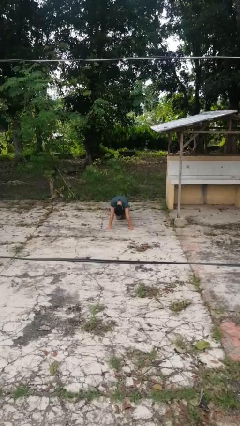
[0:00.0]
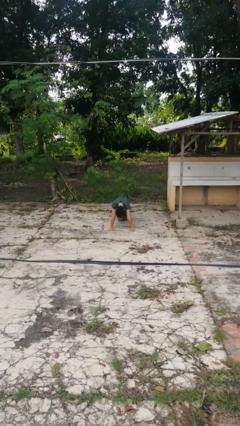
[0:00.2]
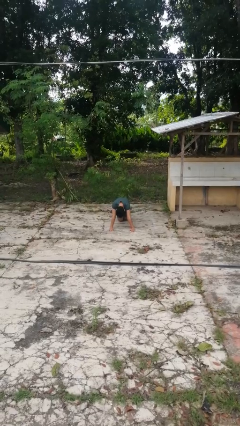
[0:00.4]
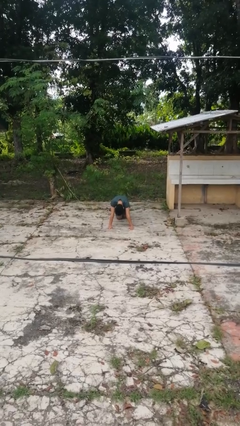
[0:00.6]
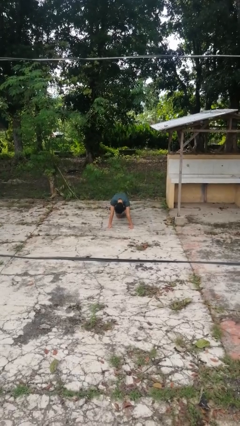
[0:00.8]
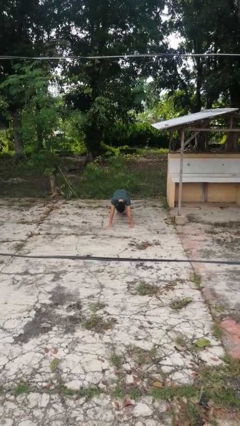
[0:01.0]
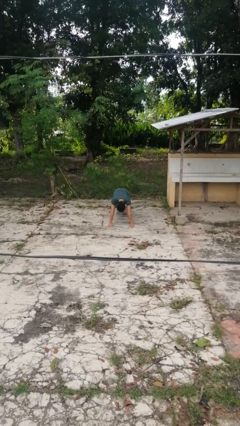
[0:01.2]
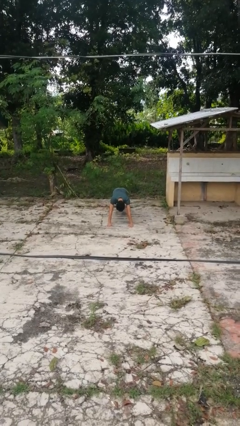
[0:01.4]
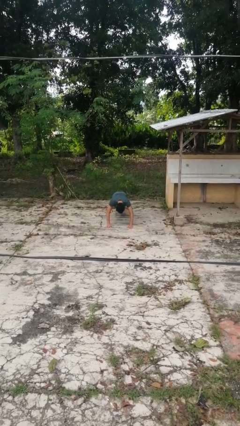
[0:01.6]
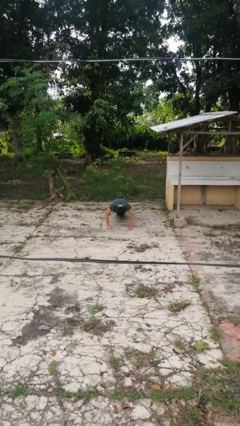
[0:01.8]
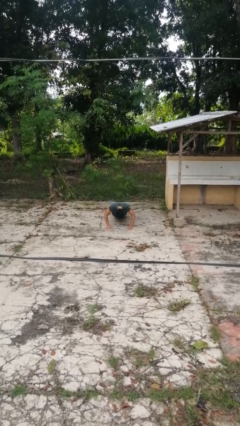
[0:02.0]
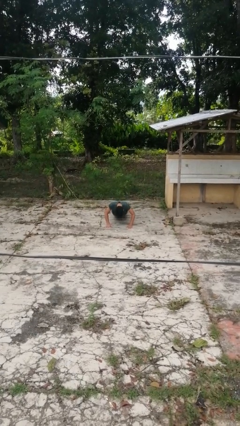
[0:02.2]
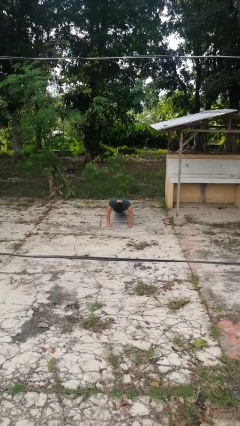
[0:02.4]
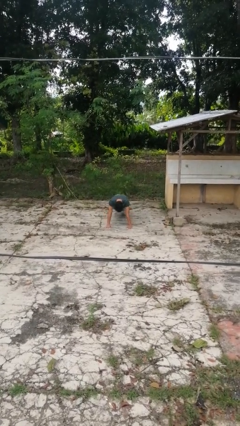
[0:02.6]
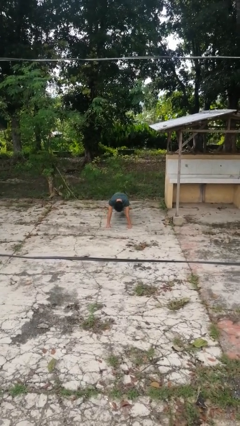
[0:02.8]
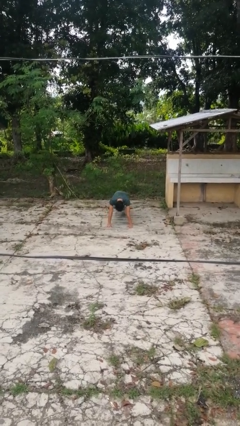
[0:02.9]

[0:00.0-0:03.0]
person exercises with pushup

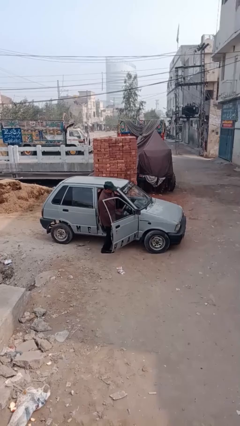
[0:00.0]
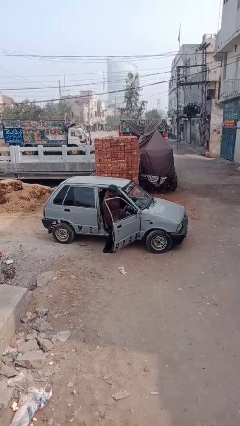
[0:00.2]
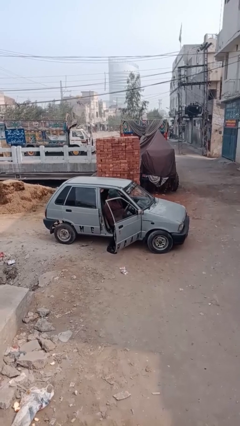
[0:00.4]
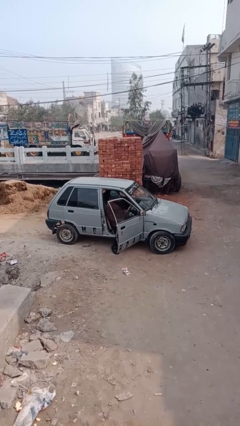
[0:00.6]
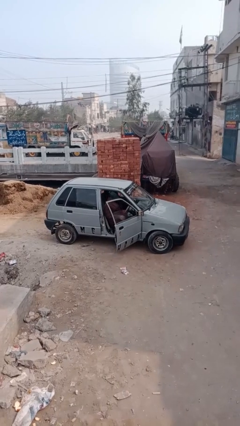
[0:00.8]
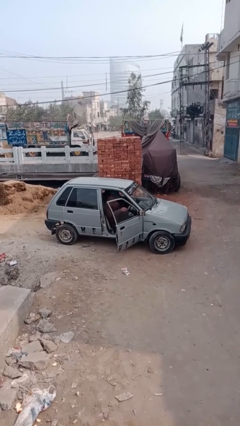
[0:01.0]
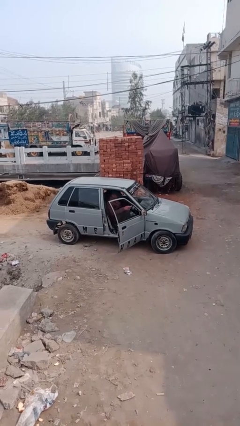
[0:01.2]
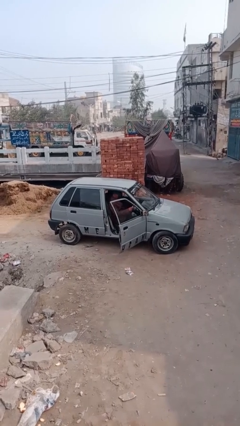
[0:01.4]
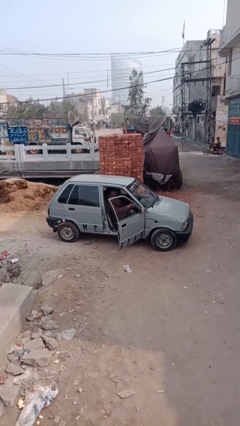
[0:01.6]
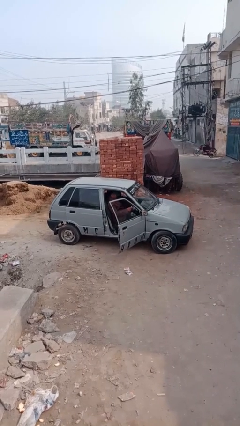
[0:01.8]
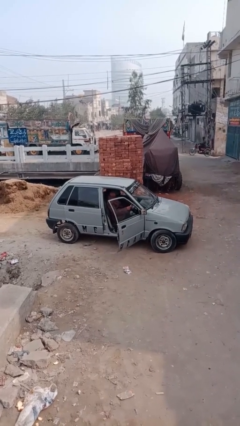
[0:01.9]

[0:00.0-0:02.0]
person enters car

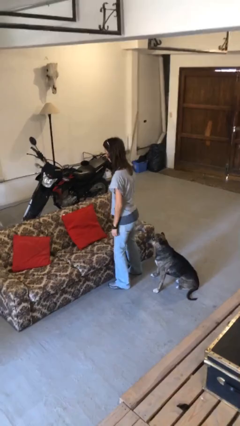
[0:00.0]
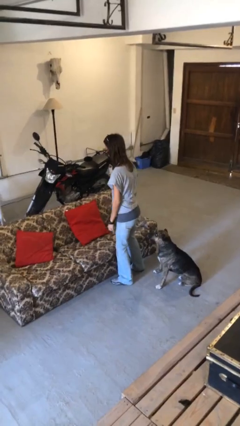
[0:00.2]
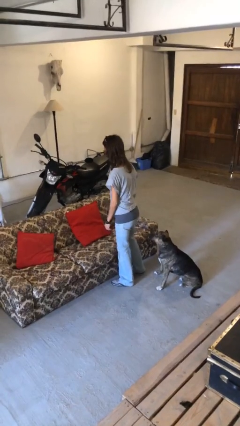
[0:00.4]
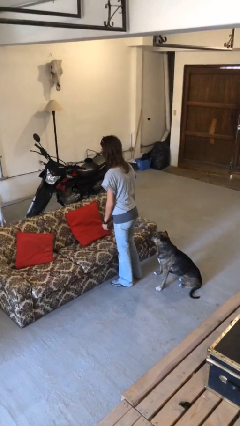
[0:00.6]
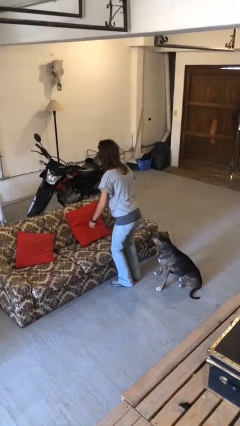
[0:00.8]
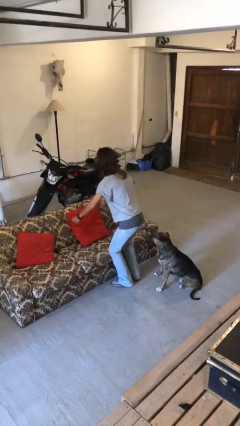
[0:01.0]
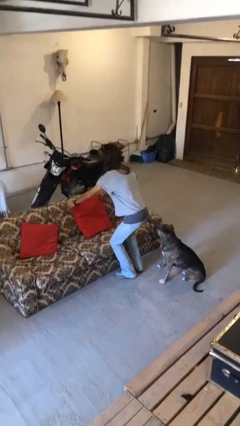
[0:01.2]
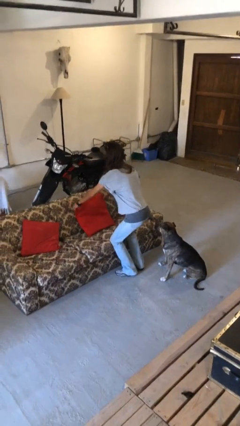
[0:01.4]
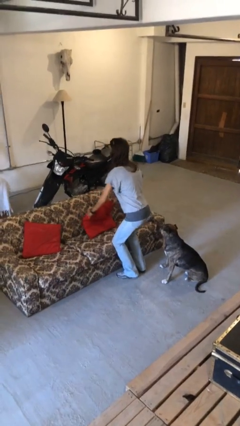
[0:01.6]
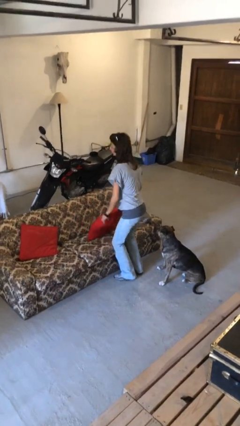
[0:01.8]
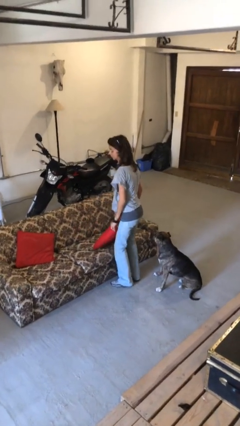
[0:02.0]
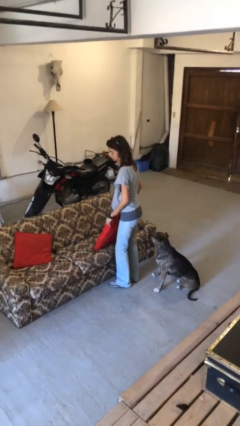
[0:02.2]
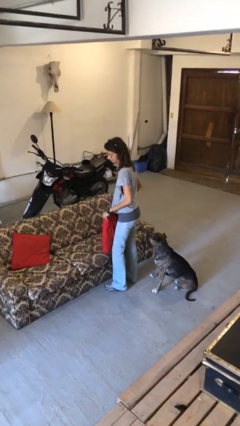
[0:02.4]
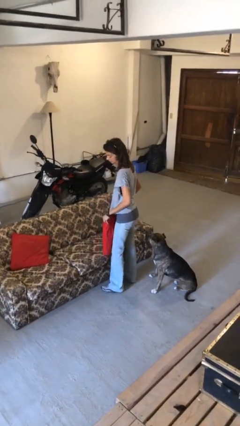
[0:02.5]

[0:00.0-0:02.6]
person picks up object from couch

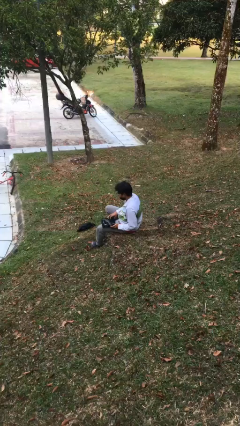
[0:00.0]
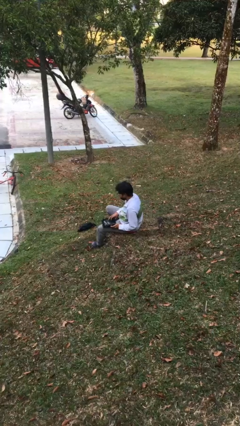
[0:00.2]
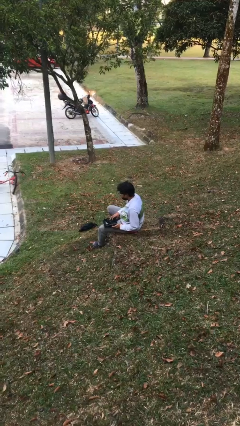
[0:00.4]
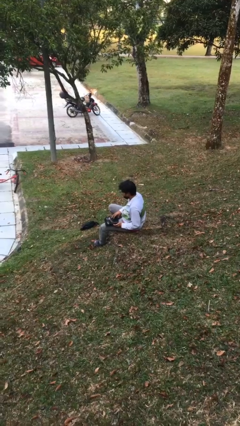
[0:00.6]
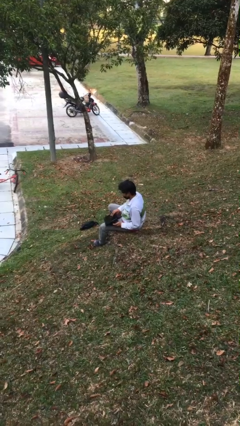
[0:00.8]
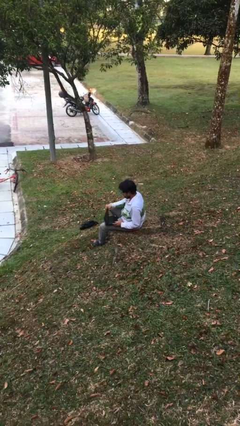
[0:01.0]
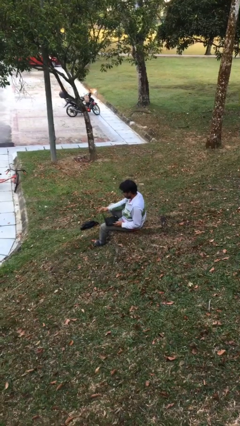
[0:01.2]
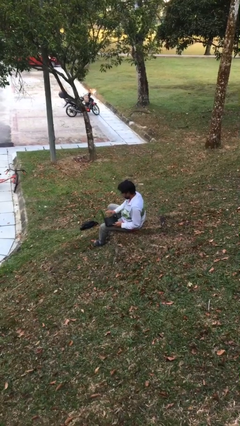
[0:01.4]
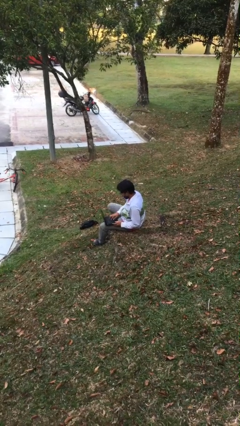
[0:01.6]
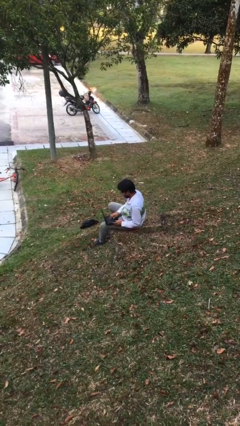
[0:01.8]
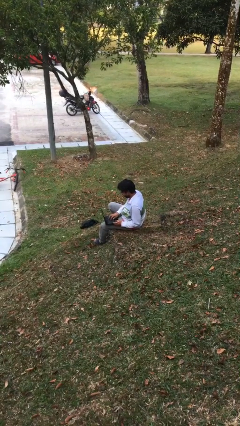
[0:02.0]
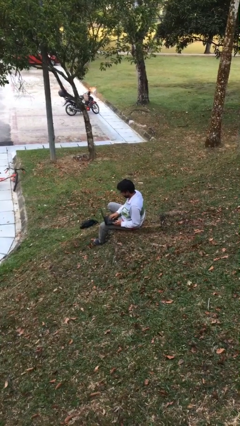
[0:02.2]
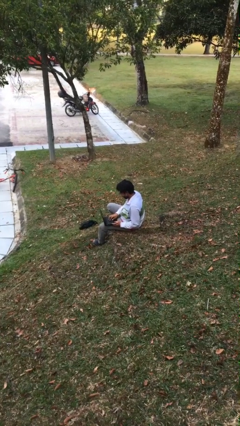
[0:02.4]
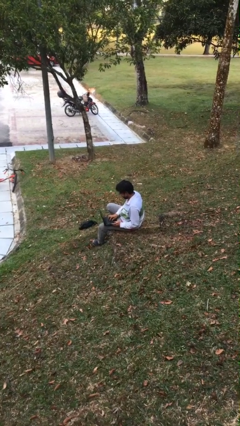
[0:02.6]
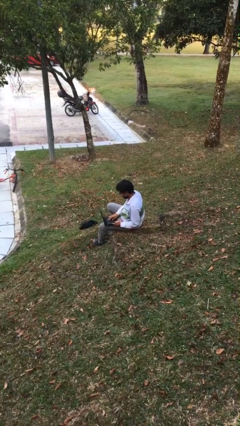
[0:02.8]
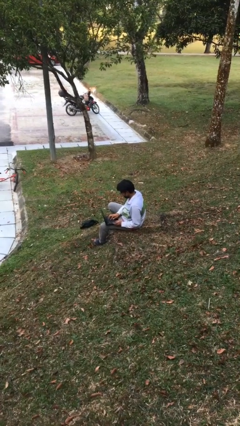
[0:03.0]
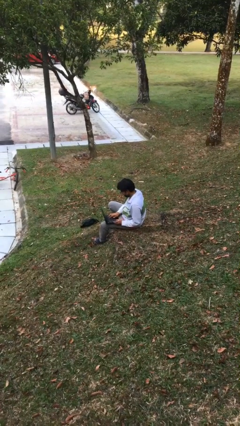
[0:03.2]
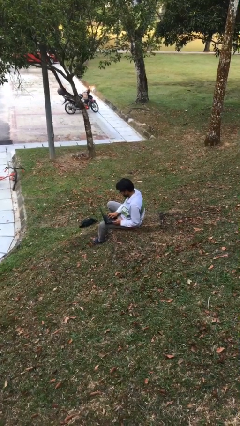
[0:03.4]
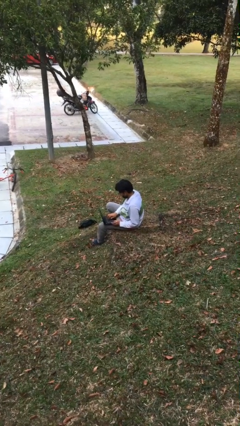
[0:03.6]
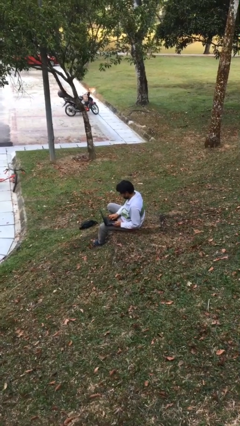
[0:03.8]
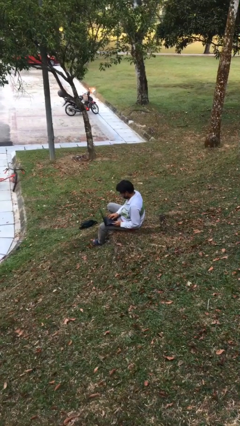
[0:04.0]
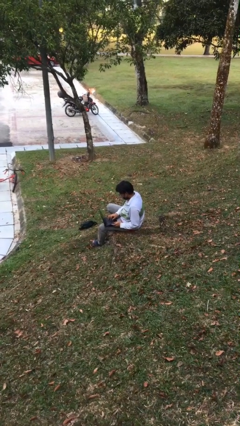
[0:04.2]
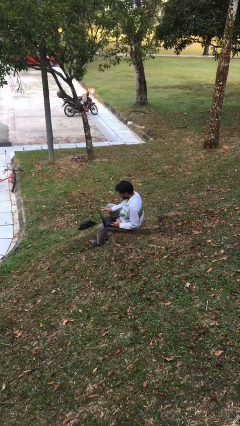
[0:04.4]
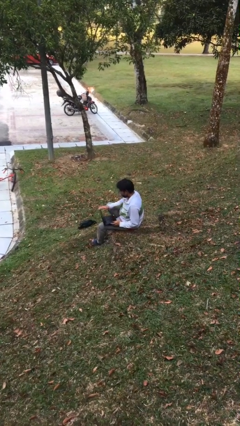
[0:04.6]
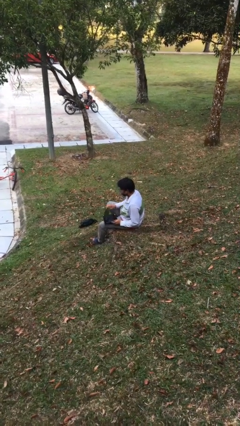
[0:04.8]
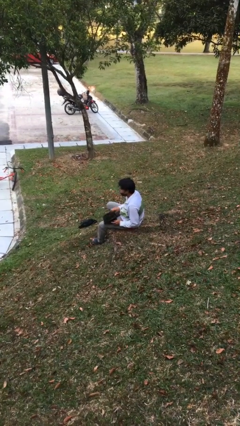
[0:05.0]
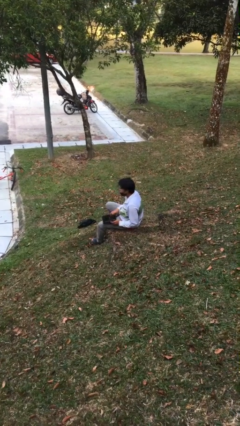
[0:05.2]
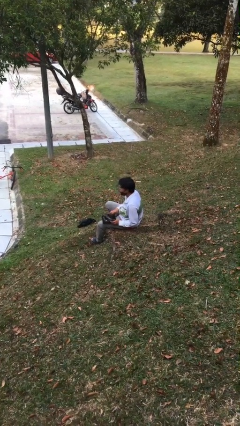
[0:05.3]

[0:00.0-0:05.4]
person interacts with laptop

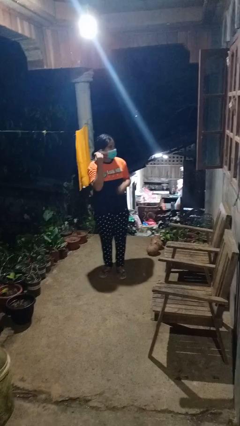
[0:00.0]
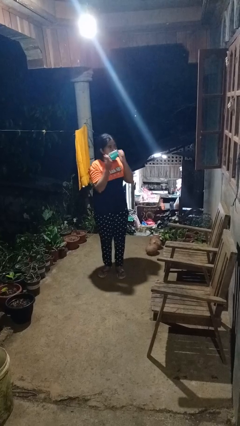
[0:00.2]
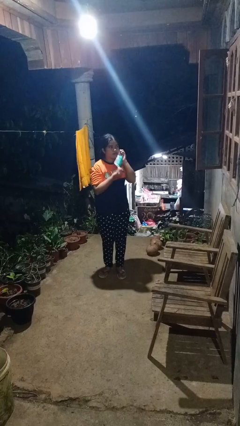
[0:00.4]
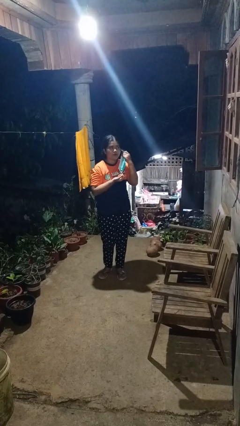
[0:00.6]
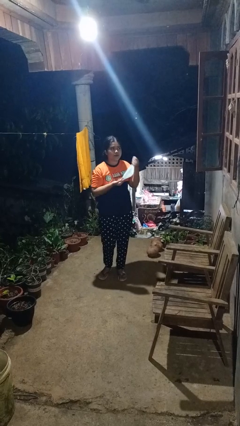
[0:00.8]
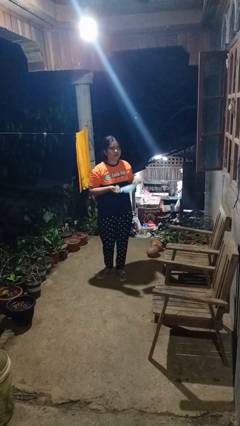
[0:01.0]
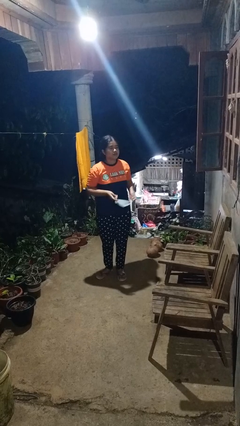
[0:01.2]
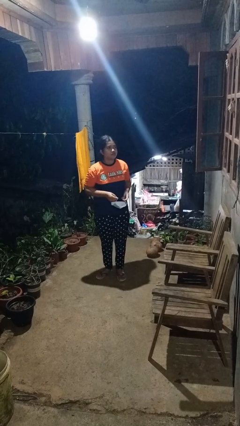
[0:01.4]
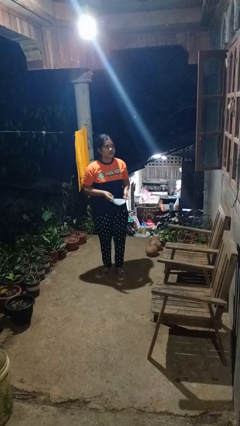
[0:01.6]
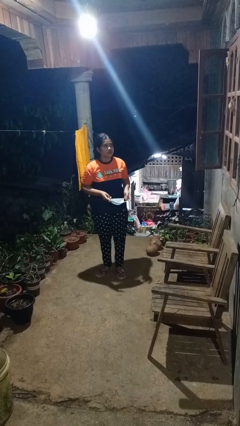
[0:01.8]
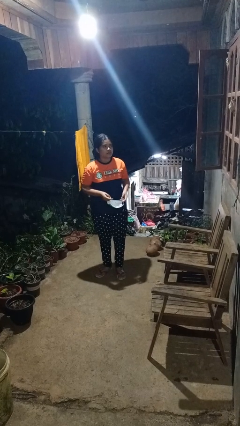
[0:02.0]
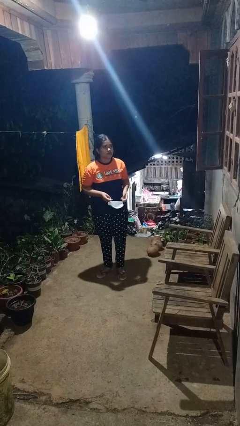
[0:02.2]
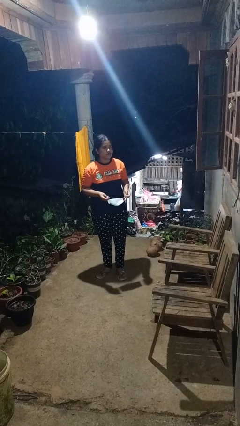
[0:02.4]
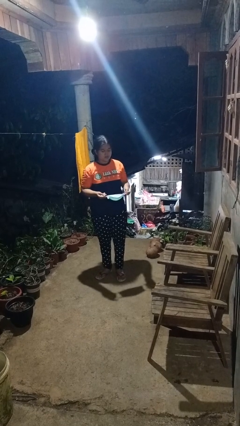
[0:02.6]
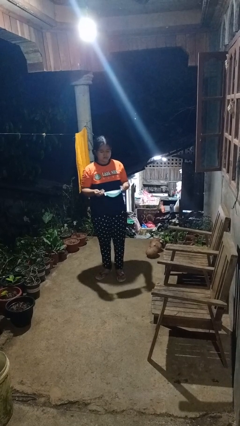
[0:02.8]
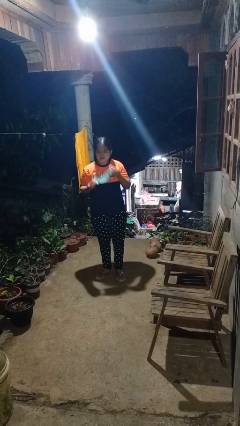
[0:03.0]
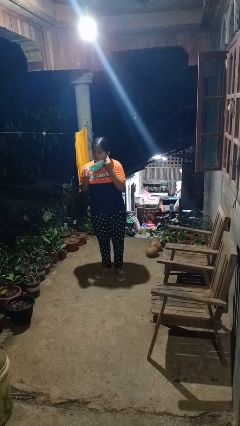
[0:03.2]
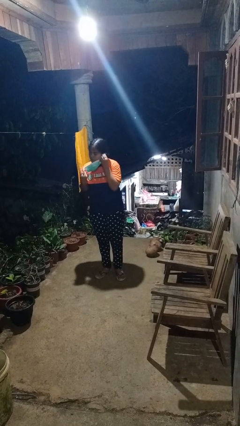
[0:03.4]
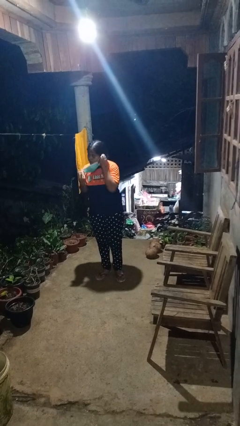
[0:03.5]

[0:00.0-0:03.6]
person takes off facemask

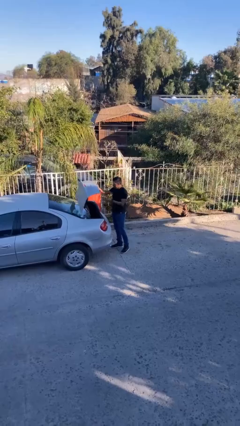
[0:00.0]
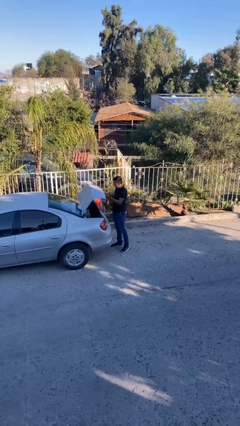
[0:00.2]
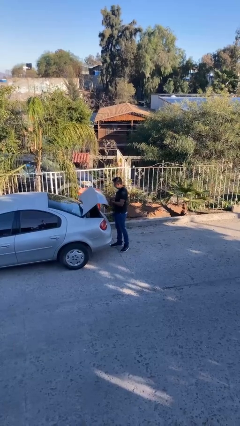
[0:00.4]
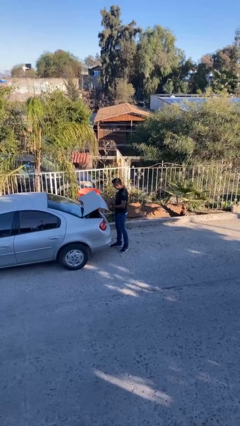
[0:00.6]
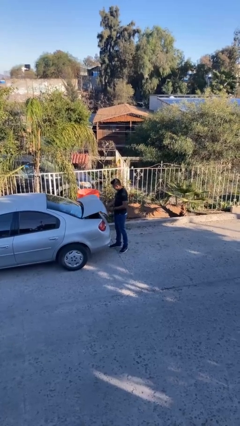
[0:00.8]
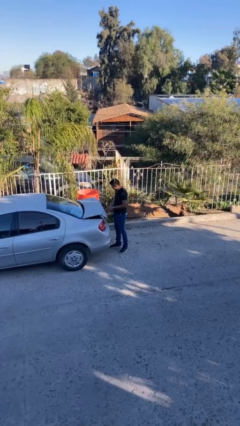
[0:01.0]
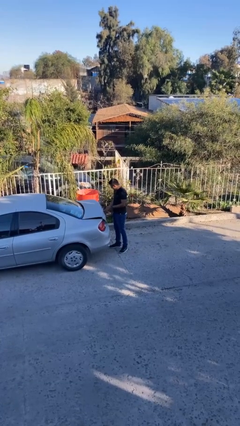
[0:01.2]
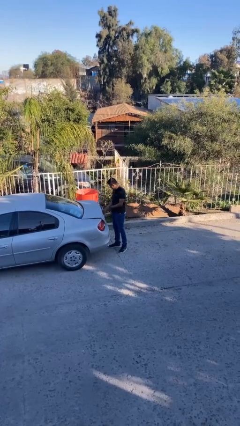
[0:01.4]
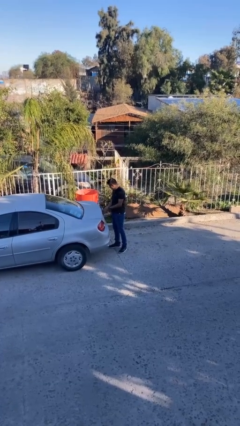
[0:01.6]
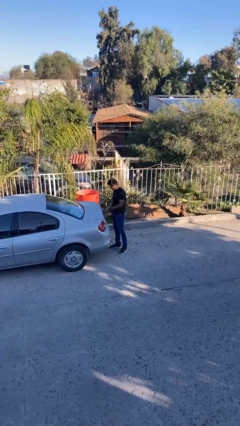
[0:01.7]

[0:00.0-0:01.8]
person closes car trunk
